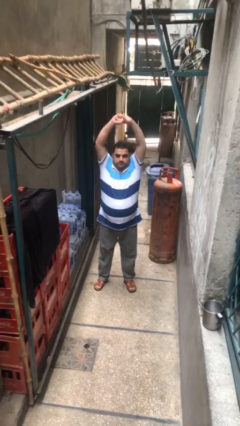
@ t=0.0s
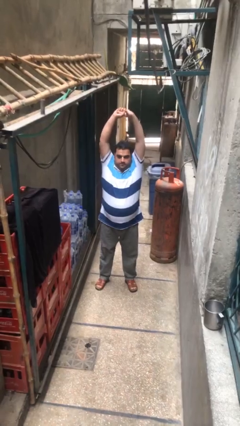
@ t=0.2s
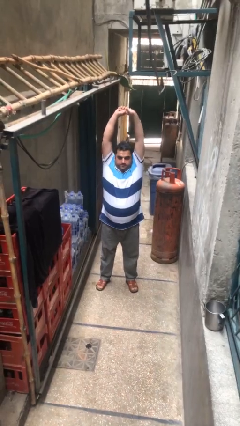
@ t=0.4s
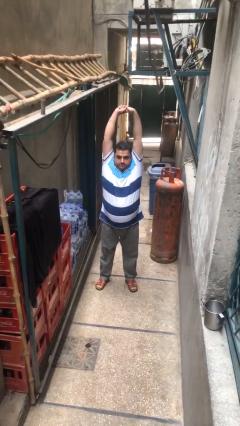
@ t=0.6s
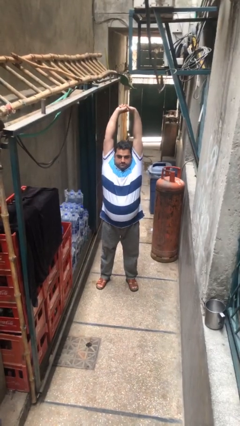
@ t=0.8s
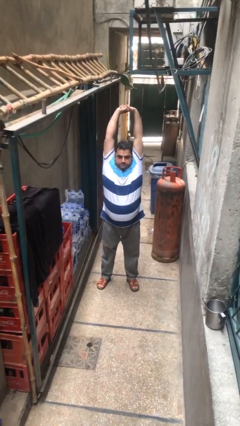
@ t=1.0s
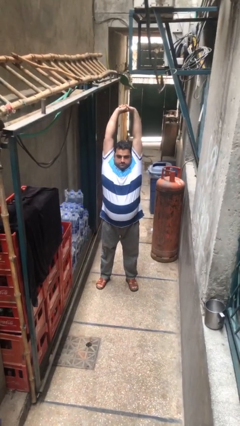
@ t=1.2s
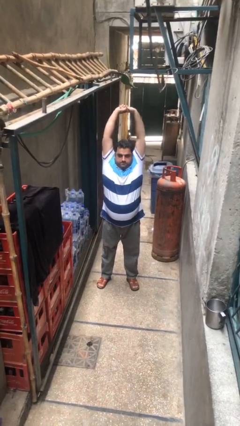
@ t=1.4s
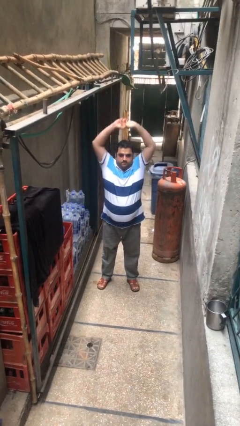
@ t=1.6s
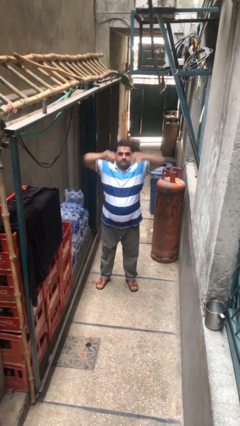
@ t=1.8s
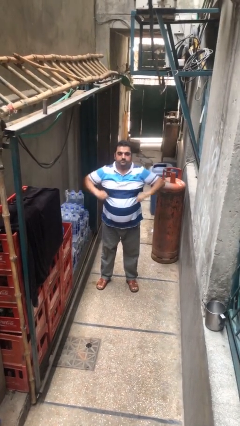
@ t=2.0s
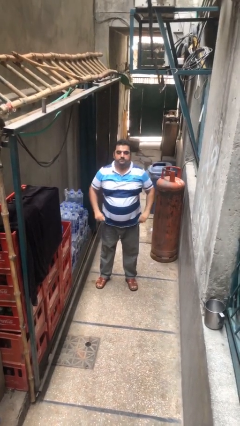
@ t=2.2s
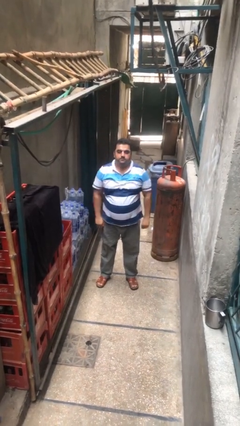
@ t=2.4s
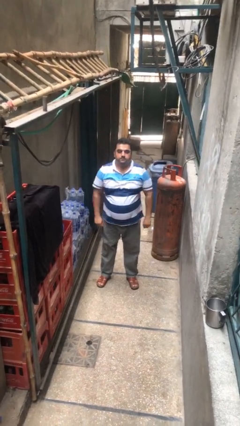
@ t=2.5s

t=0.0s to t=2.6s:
person stretches arms over head

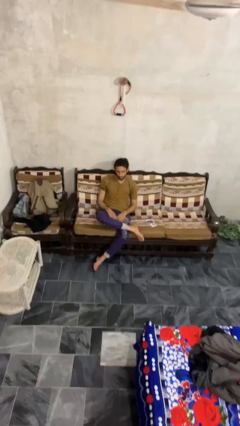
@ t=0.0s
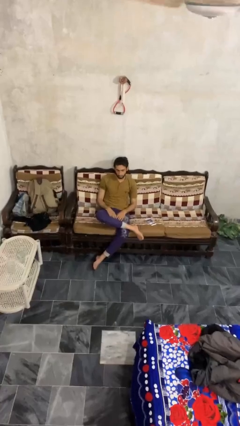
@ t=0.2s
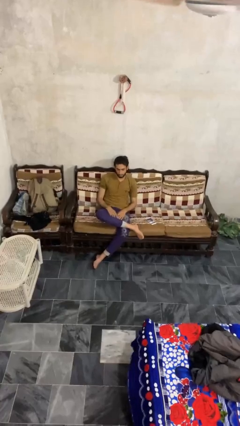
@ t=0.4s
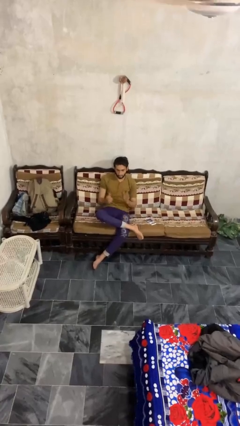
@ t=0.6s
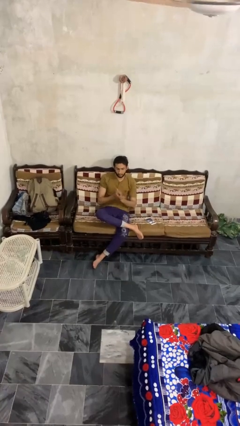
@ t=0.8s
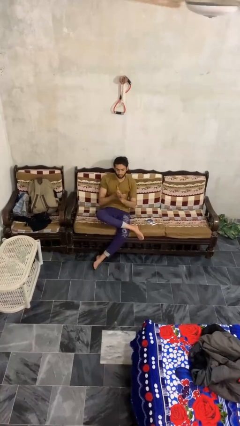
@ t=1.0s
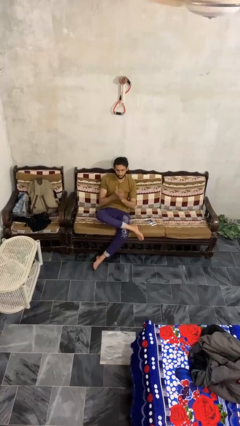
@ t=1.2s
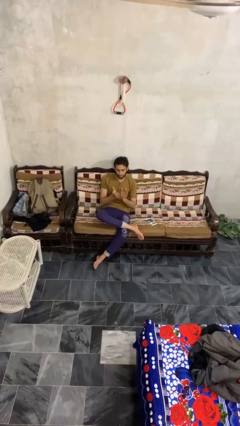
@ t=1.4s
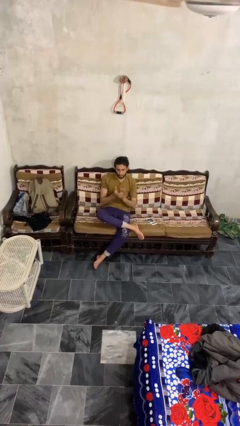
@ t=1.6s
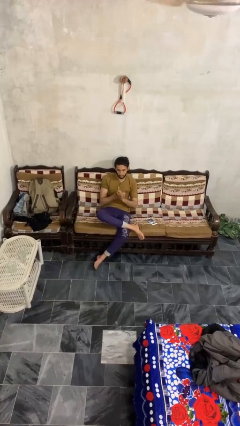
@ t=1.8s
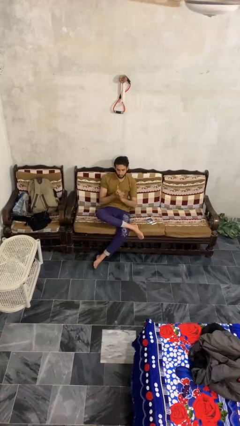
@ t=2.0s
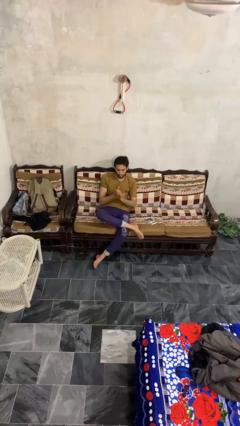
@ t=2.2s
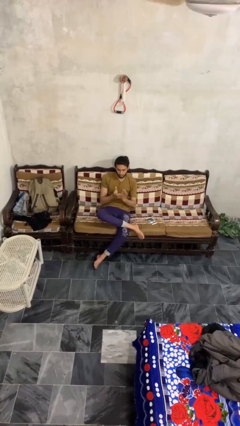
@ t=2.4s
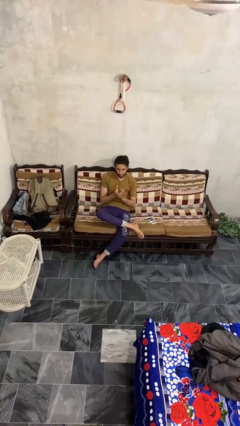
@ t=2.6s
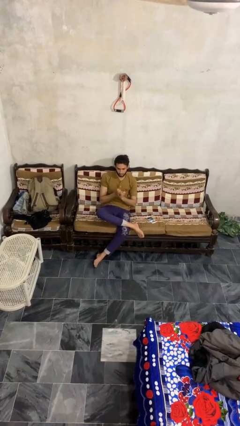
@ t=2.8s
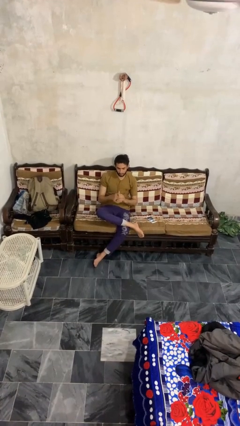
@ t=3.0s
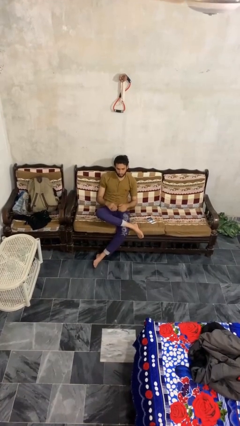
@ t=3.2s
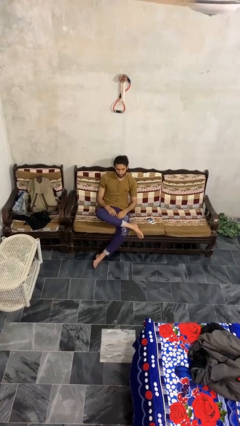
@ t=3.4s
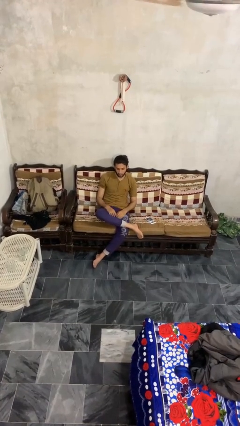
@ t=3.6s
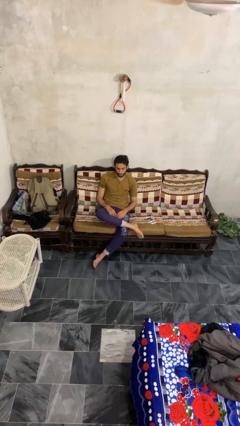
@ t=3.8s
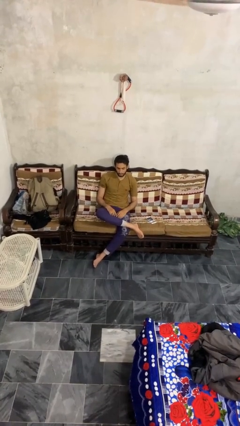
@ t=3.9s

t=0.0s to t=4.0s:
person claps hands

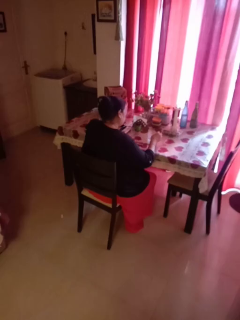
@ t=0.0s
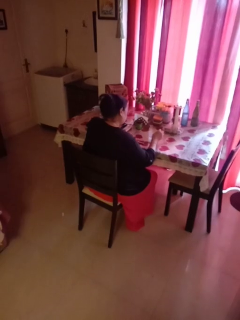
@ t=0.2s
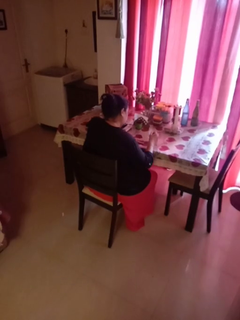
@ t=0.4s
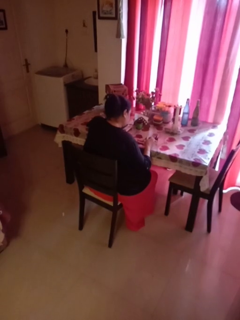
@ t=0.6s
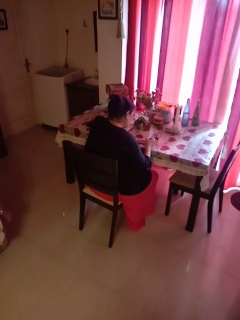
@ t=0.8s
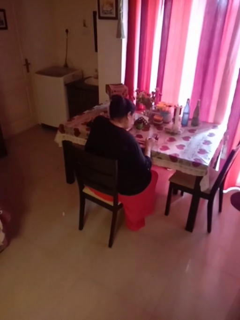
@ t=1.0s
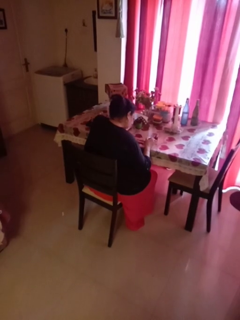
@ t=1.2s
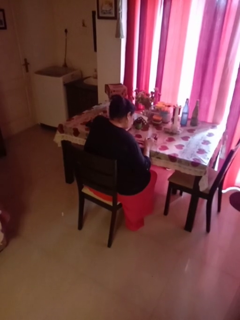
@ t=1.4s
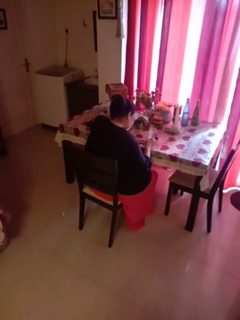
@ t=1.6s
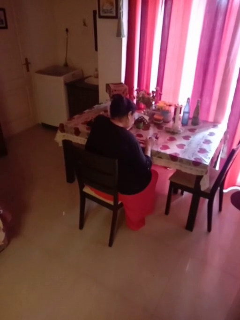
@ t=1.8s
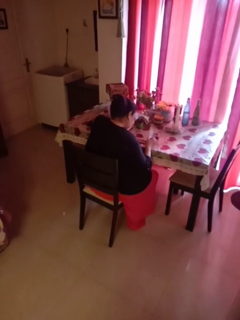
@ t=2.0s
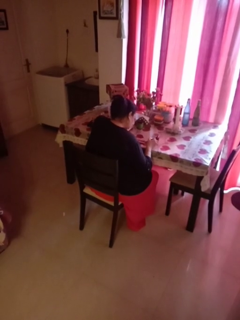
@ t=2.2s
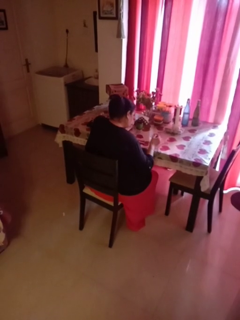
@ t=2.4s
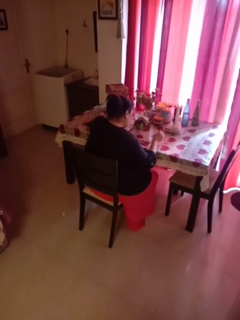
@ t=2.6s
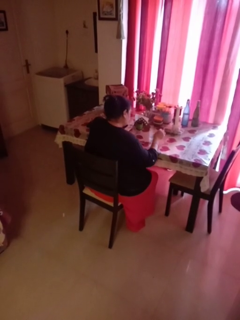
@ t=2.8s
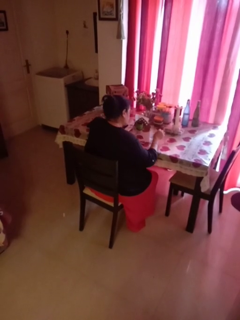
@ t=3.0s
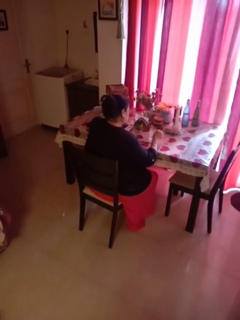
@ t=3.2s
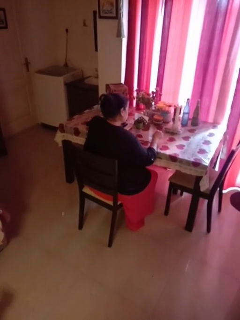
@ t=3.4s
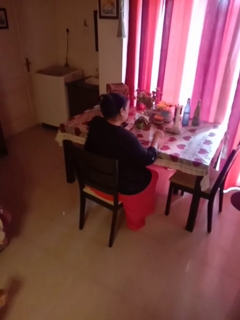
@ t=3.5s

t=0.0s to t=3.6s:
person paints fingernails

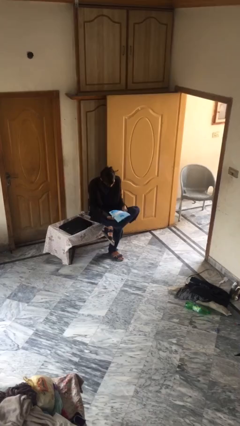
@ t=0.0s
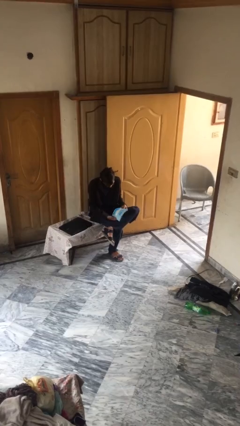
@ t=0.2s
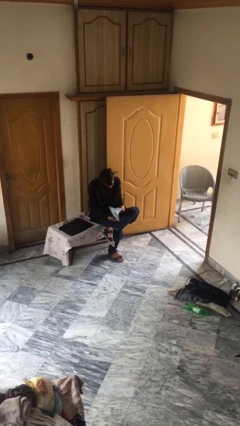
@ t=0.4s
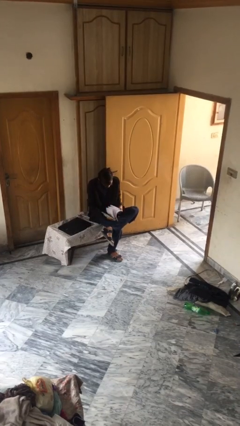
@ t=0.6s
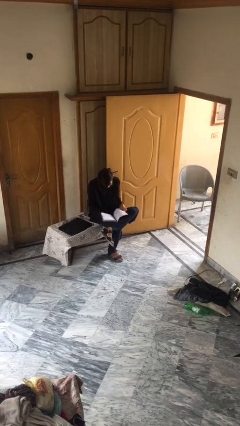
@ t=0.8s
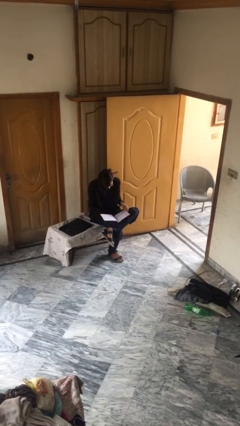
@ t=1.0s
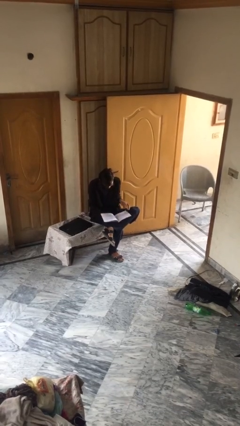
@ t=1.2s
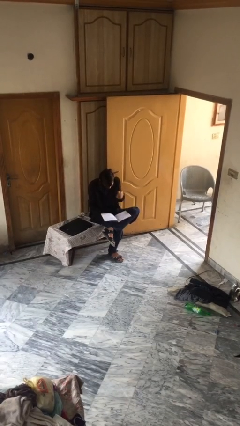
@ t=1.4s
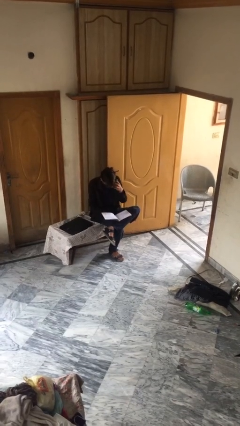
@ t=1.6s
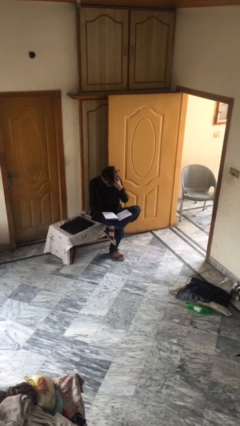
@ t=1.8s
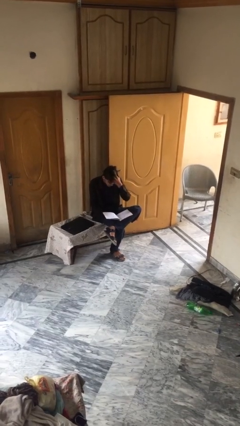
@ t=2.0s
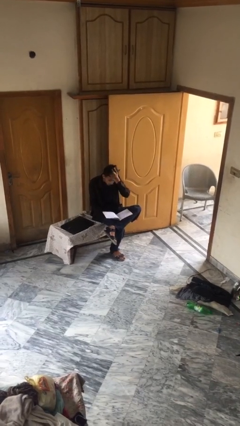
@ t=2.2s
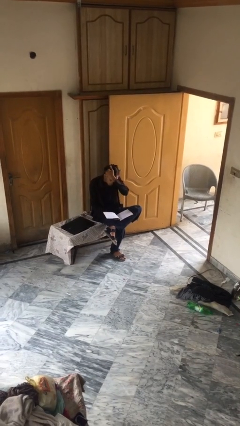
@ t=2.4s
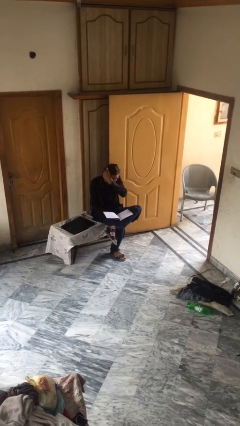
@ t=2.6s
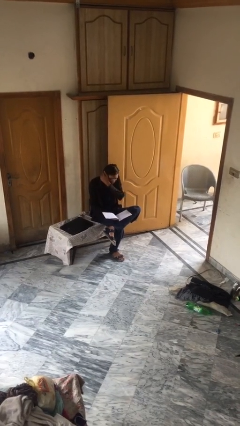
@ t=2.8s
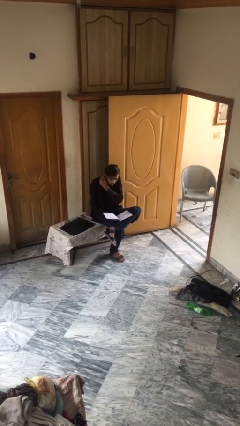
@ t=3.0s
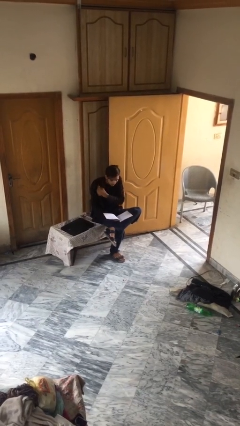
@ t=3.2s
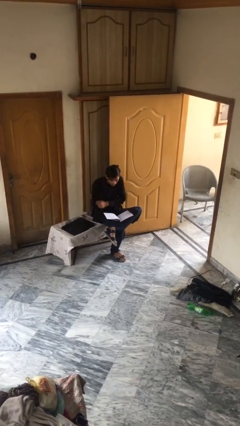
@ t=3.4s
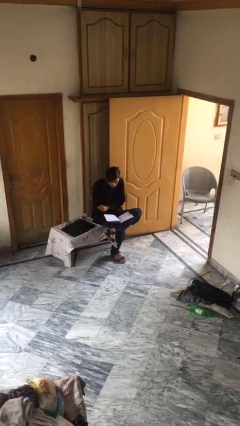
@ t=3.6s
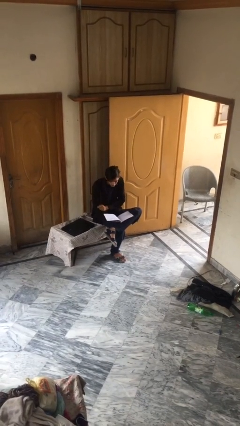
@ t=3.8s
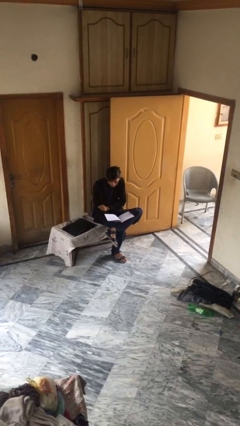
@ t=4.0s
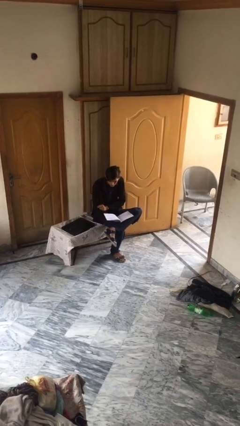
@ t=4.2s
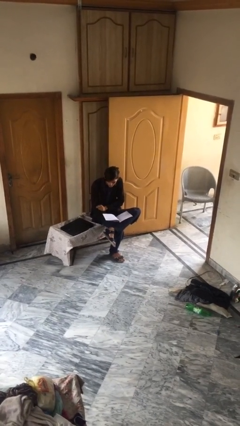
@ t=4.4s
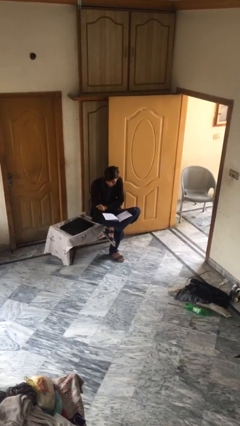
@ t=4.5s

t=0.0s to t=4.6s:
person reads document

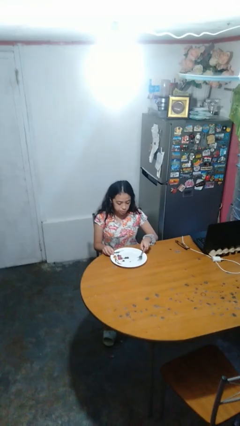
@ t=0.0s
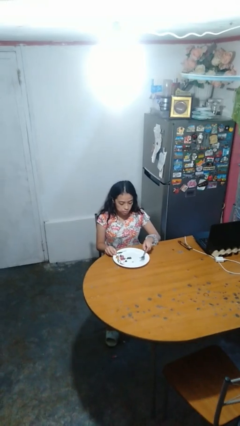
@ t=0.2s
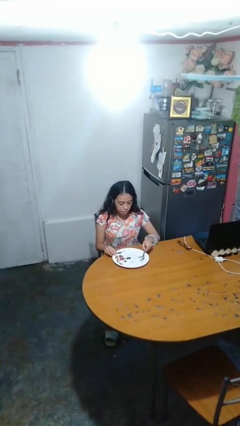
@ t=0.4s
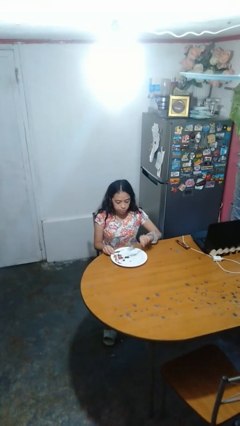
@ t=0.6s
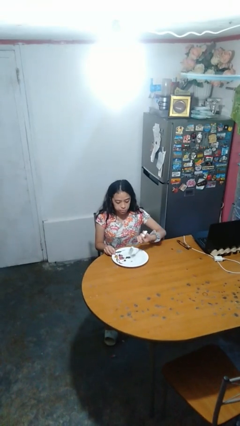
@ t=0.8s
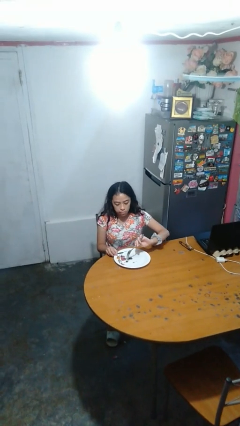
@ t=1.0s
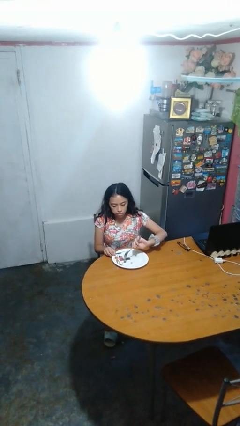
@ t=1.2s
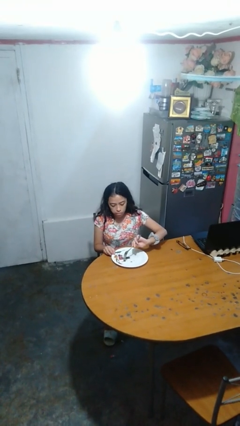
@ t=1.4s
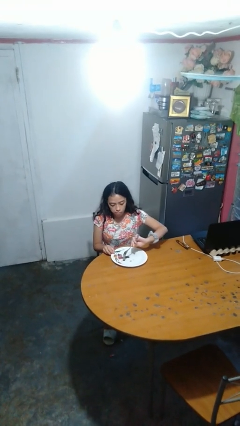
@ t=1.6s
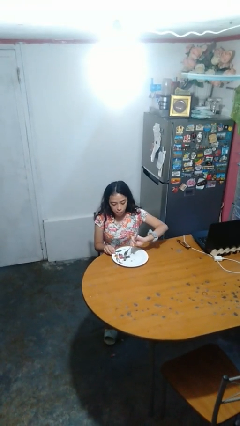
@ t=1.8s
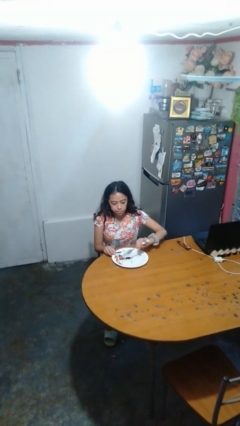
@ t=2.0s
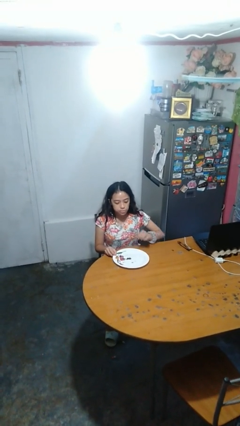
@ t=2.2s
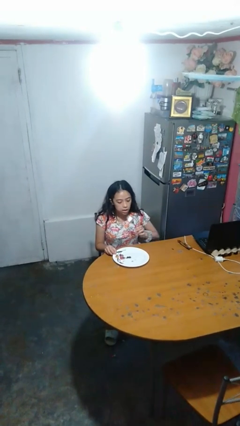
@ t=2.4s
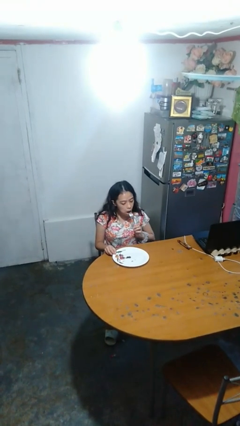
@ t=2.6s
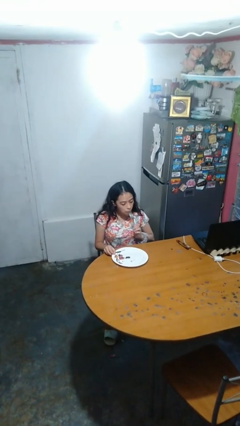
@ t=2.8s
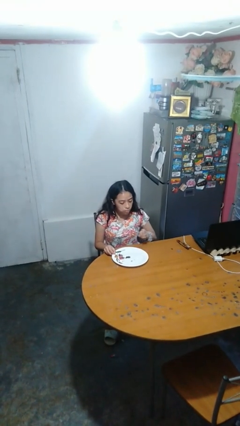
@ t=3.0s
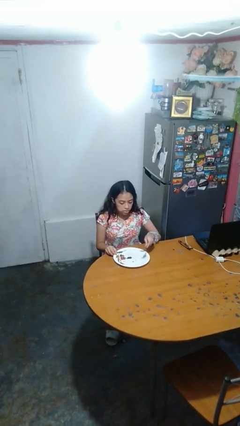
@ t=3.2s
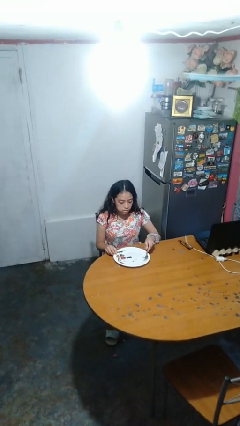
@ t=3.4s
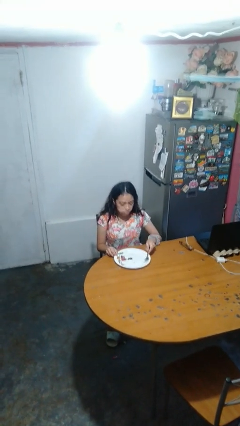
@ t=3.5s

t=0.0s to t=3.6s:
person eats with utensil
